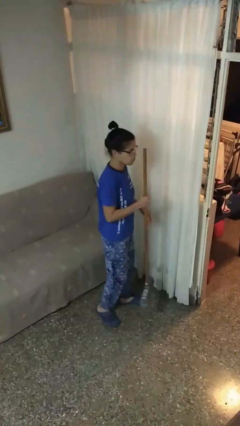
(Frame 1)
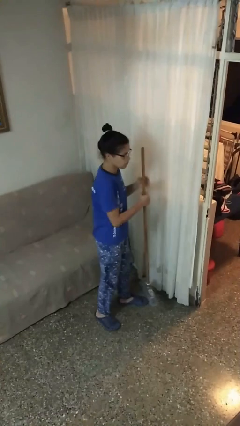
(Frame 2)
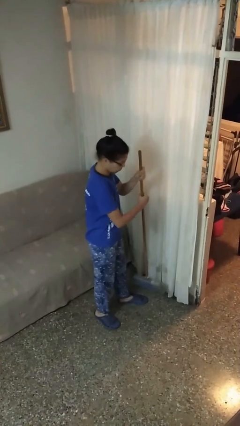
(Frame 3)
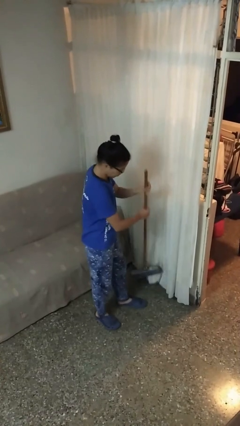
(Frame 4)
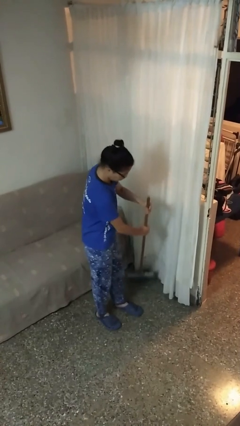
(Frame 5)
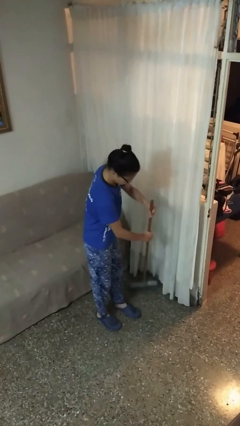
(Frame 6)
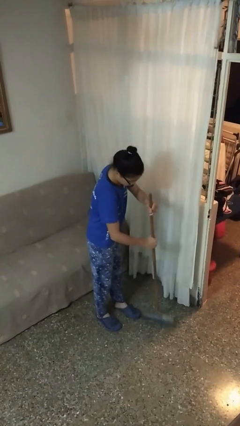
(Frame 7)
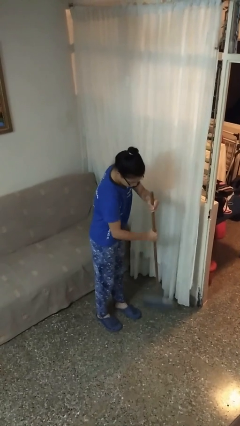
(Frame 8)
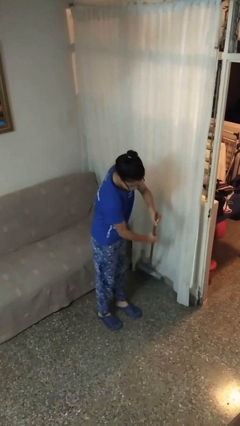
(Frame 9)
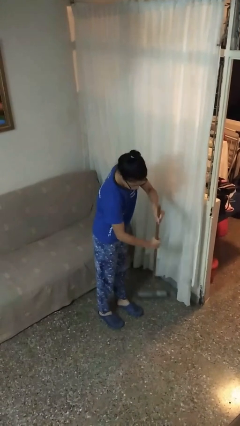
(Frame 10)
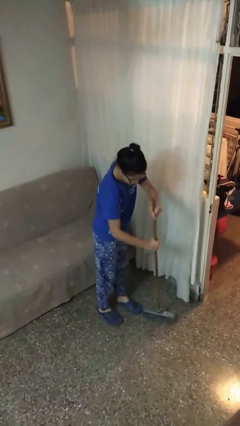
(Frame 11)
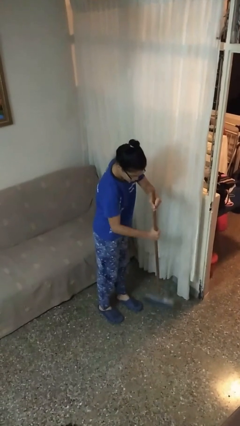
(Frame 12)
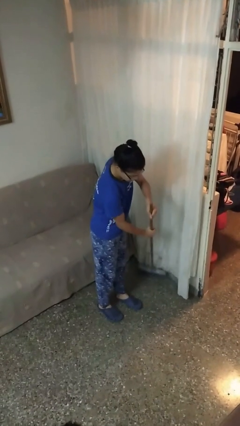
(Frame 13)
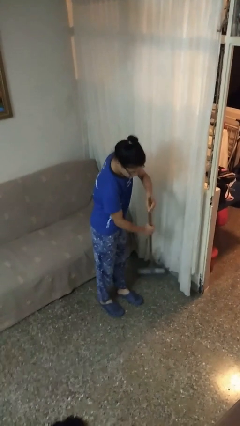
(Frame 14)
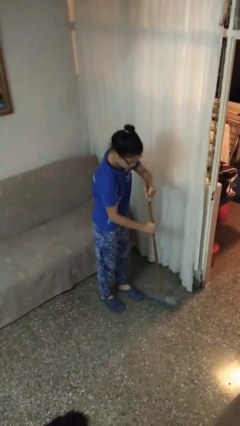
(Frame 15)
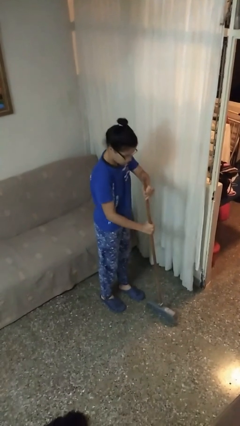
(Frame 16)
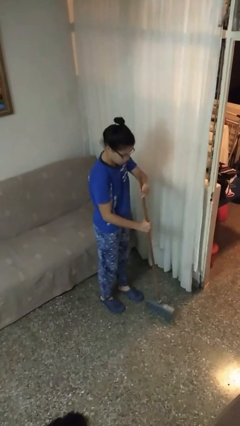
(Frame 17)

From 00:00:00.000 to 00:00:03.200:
person sweeps floor

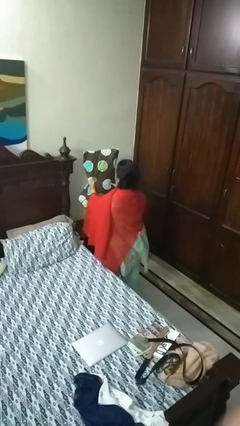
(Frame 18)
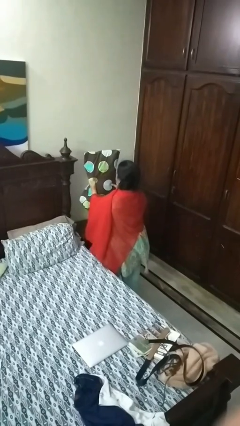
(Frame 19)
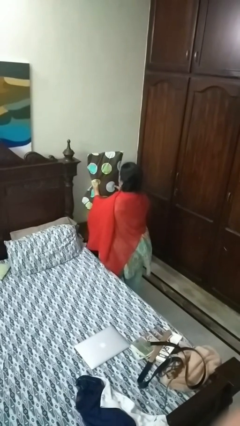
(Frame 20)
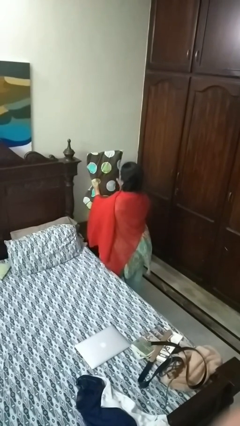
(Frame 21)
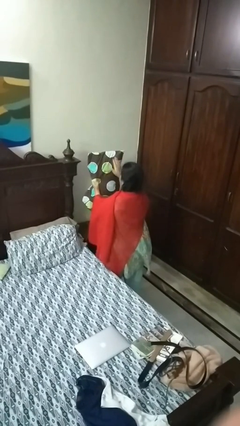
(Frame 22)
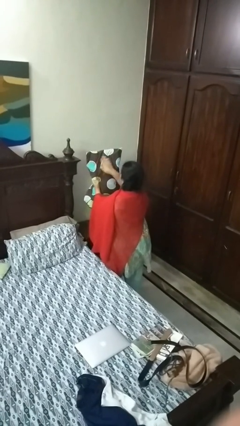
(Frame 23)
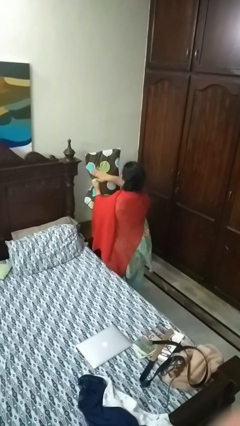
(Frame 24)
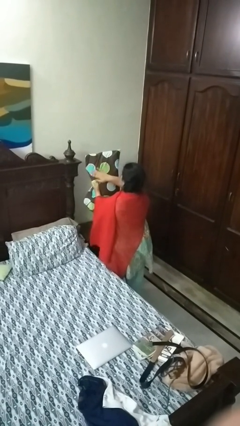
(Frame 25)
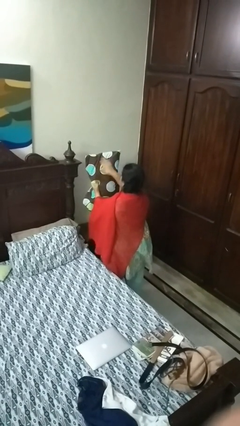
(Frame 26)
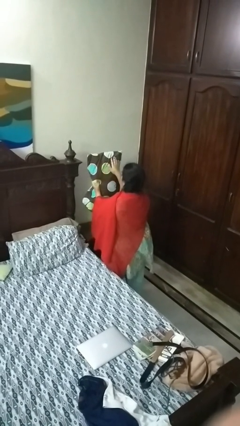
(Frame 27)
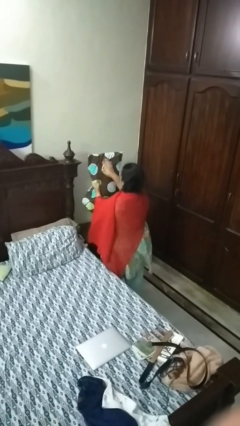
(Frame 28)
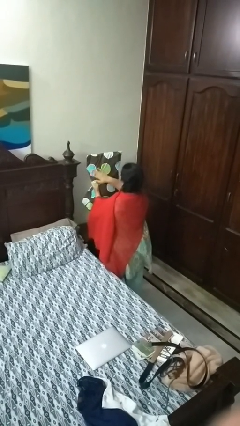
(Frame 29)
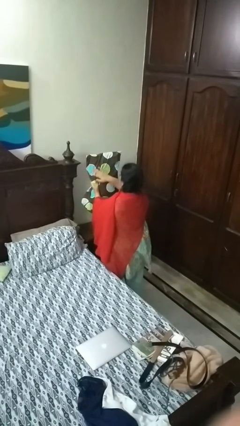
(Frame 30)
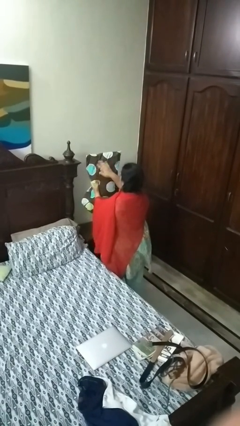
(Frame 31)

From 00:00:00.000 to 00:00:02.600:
person waves hand over object

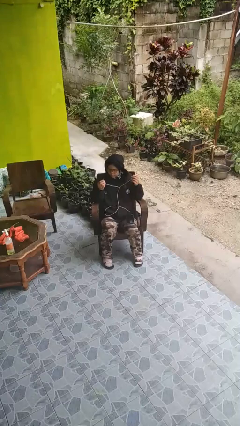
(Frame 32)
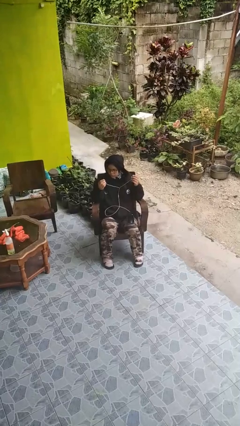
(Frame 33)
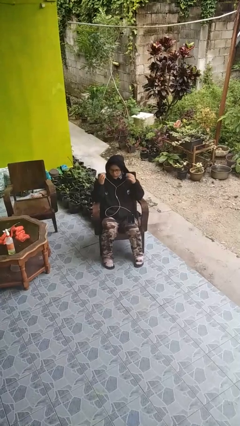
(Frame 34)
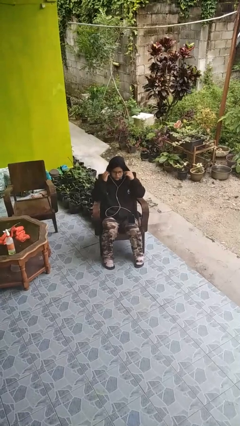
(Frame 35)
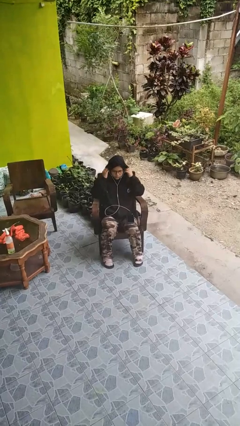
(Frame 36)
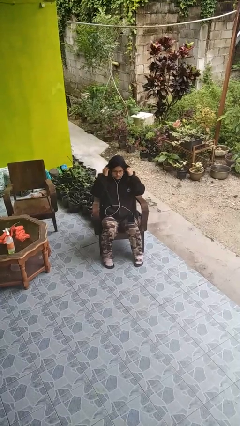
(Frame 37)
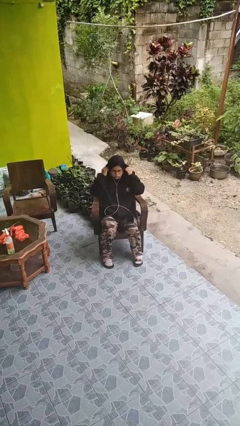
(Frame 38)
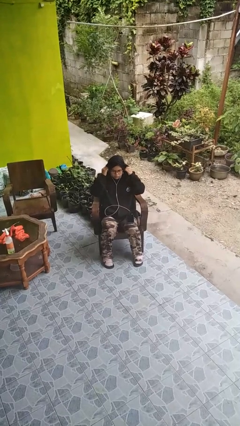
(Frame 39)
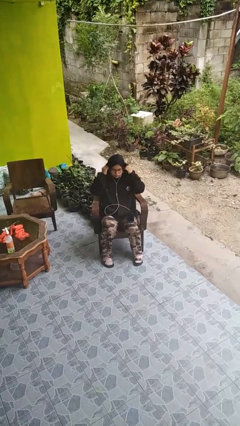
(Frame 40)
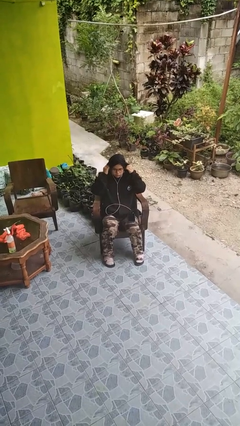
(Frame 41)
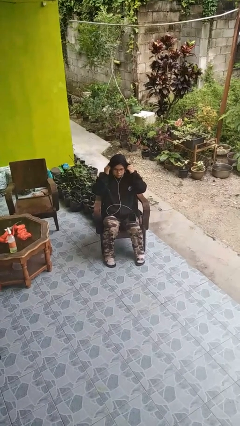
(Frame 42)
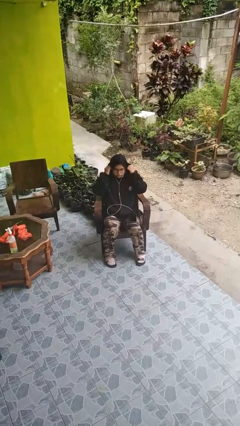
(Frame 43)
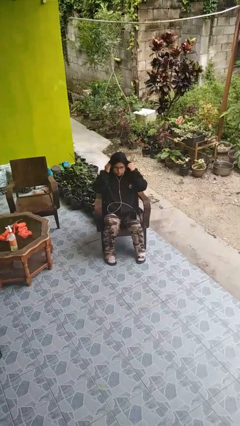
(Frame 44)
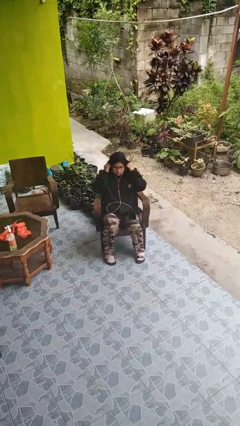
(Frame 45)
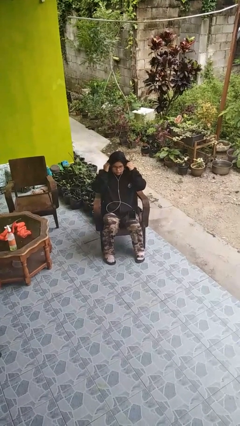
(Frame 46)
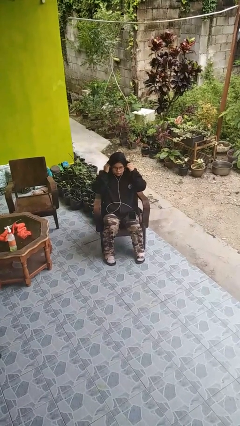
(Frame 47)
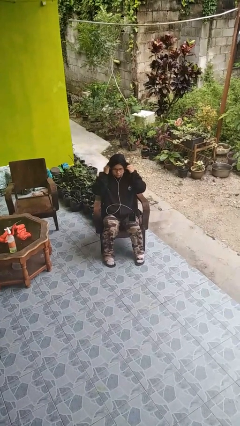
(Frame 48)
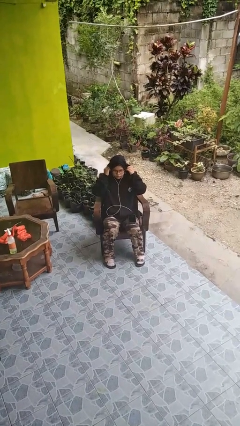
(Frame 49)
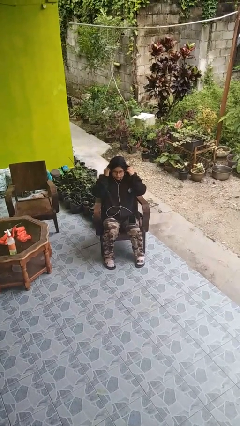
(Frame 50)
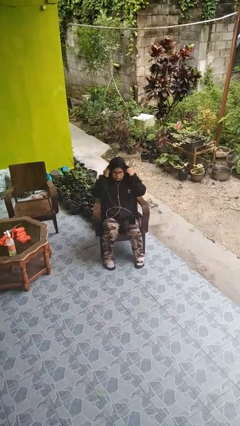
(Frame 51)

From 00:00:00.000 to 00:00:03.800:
person puts on headphones

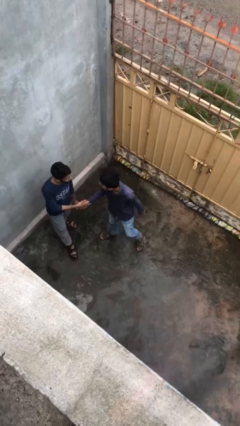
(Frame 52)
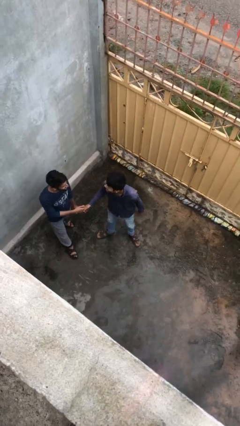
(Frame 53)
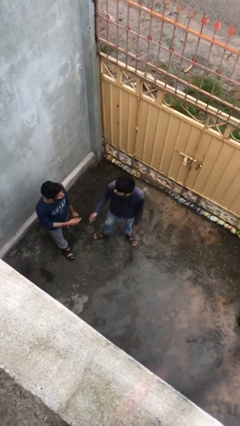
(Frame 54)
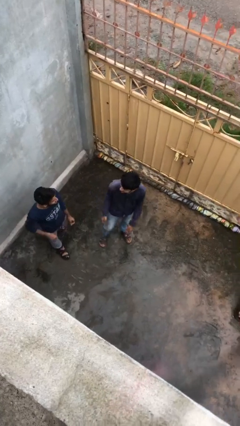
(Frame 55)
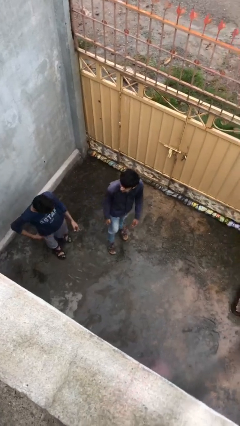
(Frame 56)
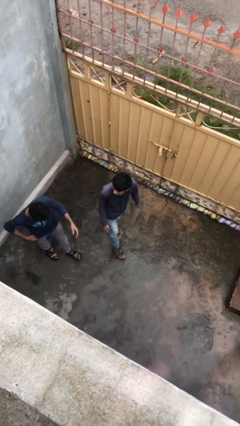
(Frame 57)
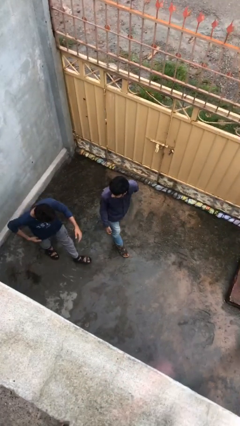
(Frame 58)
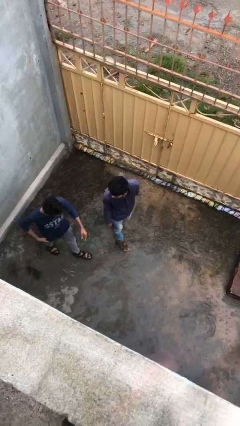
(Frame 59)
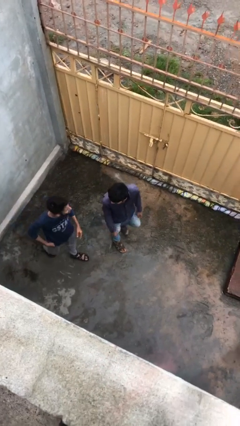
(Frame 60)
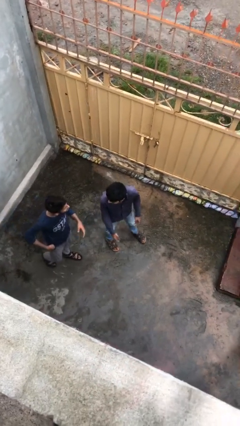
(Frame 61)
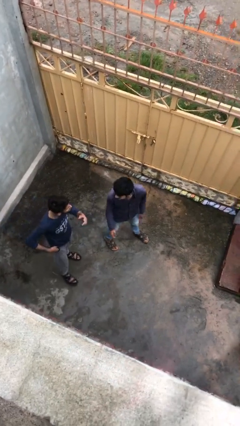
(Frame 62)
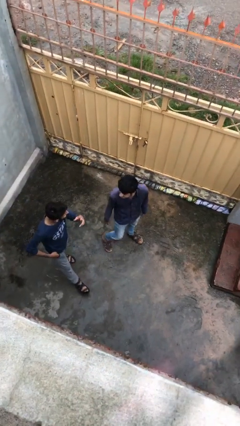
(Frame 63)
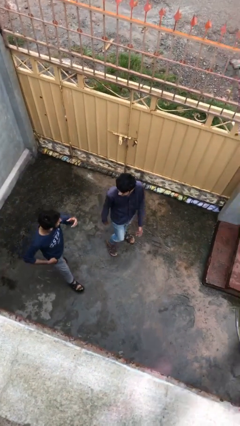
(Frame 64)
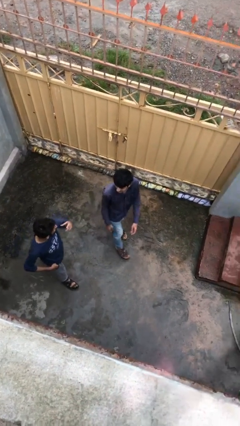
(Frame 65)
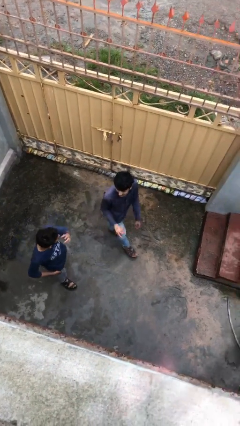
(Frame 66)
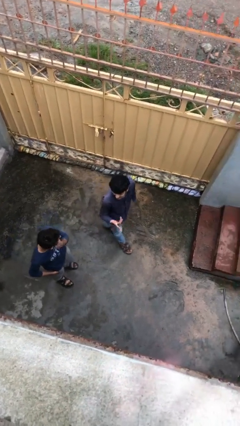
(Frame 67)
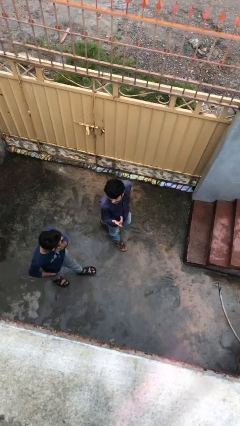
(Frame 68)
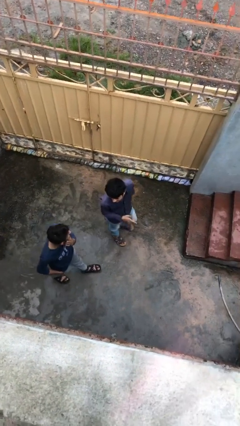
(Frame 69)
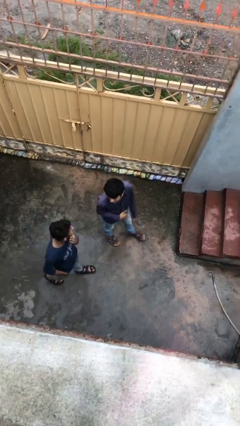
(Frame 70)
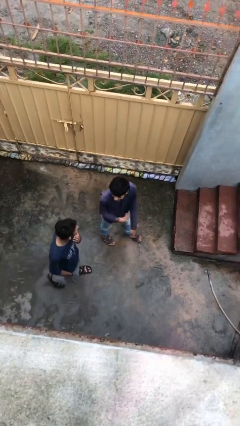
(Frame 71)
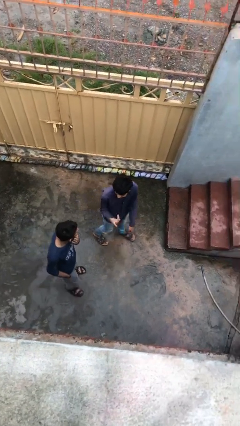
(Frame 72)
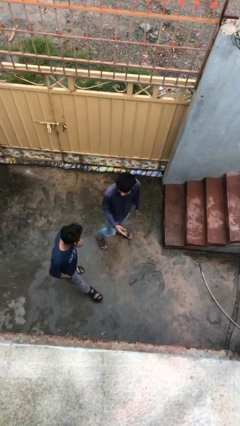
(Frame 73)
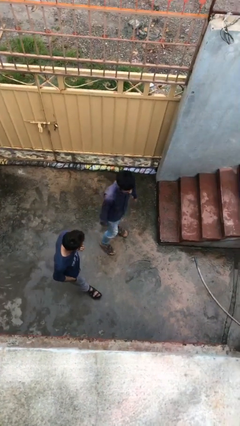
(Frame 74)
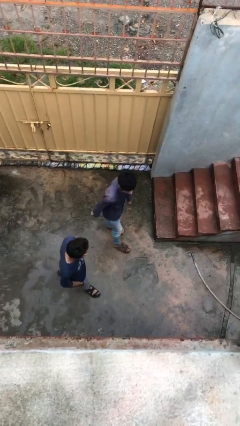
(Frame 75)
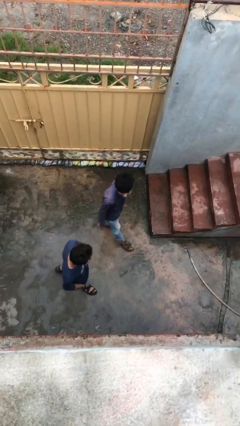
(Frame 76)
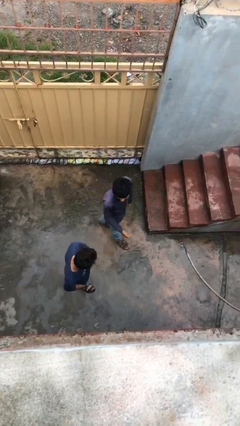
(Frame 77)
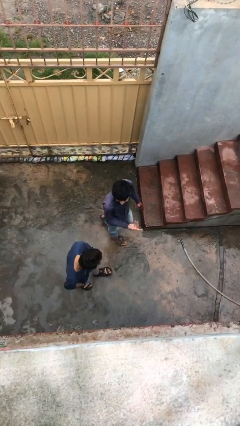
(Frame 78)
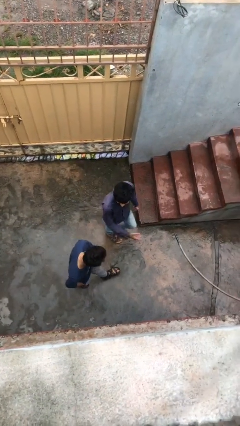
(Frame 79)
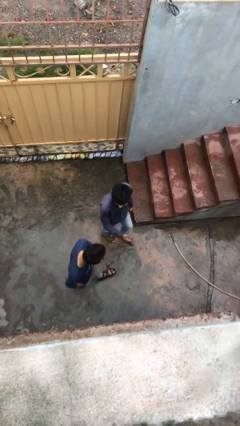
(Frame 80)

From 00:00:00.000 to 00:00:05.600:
person talks to person

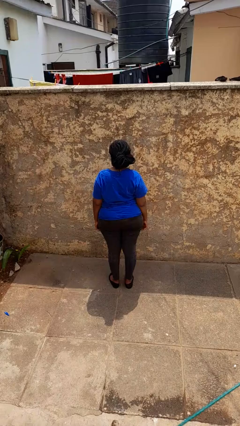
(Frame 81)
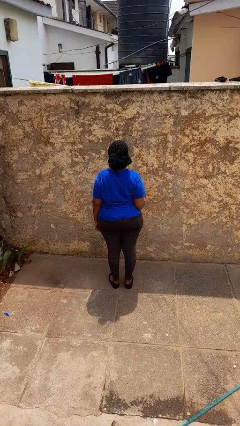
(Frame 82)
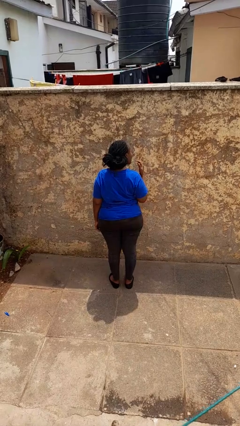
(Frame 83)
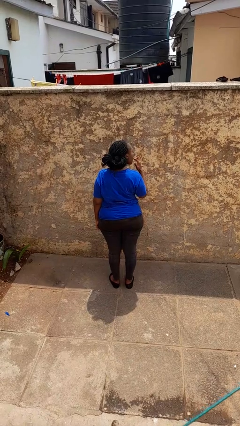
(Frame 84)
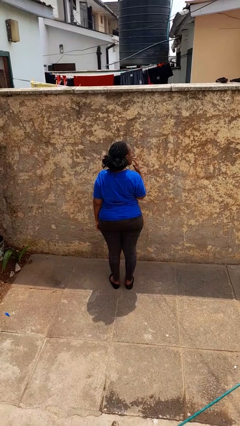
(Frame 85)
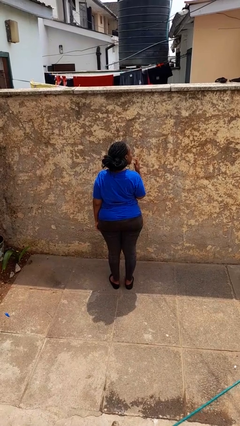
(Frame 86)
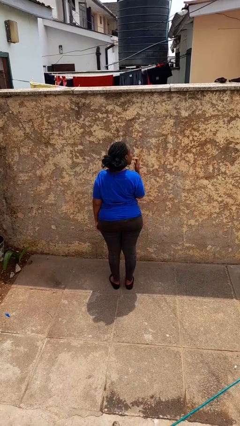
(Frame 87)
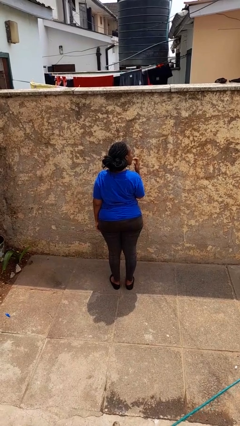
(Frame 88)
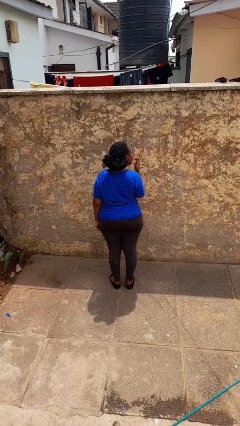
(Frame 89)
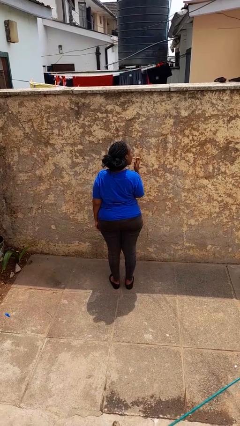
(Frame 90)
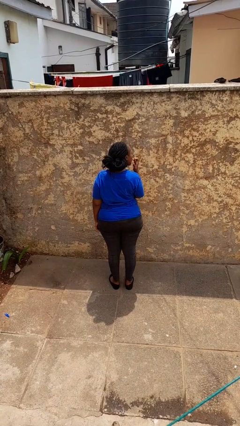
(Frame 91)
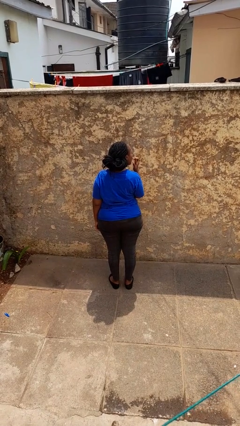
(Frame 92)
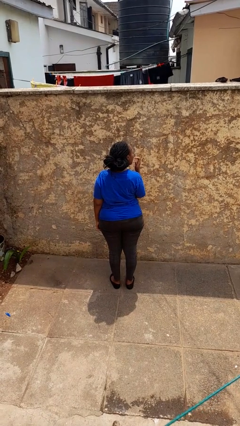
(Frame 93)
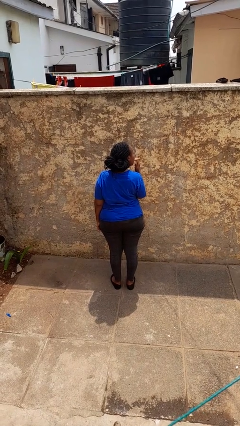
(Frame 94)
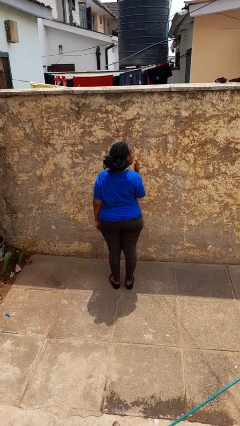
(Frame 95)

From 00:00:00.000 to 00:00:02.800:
person licks fingers
